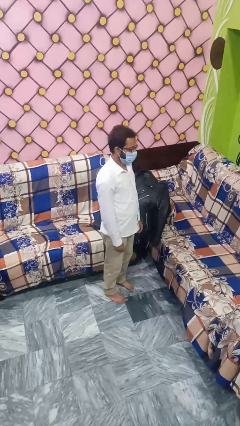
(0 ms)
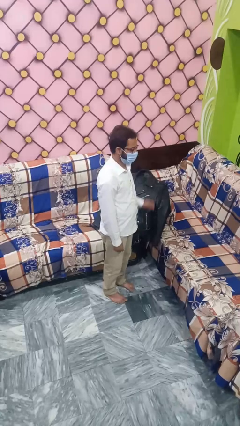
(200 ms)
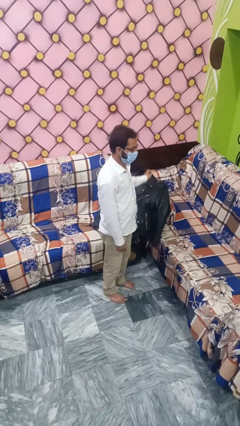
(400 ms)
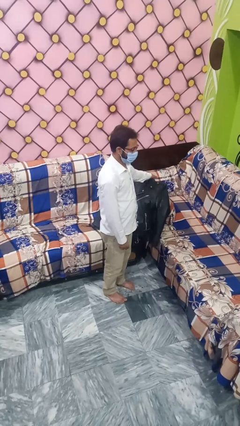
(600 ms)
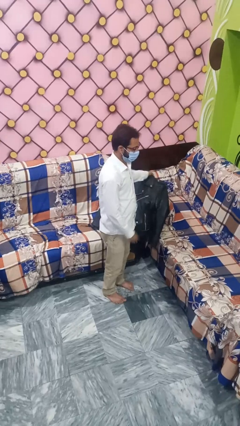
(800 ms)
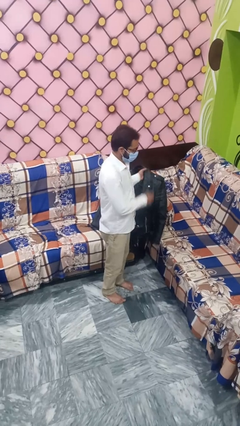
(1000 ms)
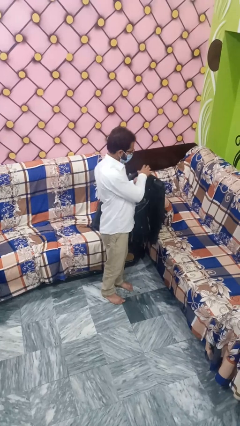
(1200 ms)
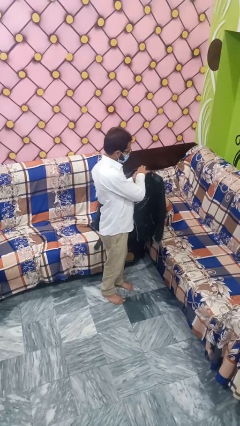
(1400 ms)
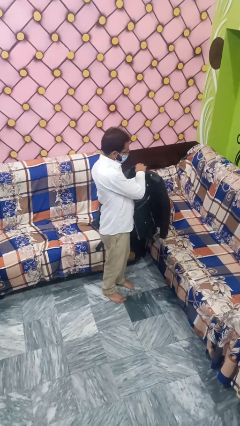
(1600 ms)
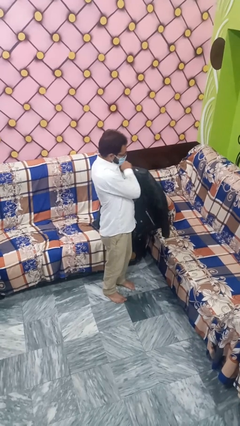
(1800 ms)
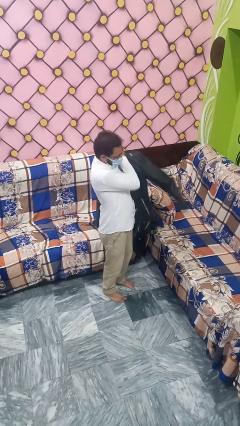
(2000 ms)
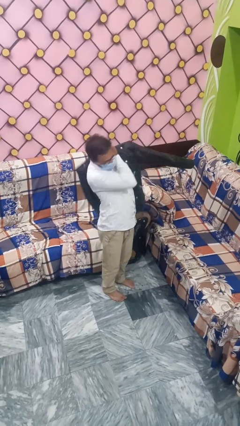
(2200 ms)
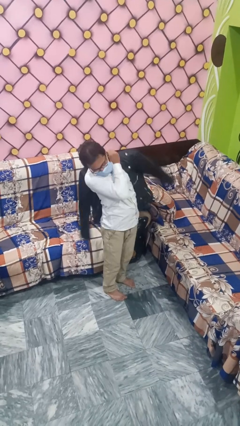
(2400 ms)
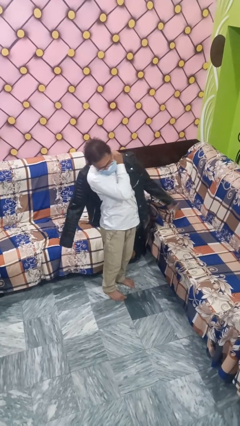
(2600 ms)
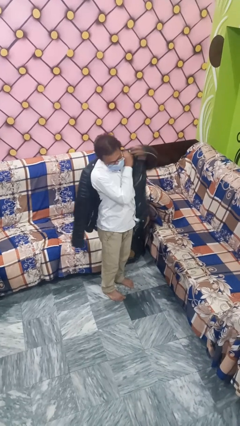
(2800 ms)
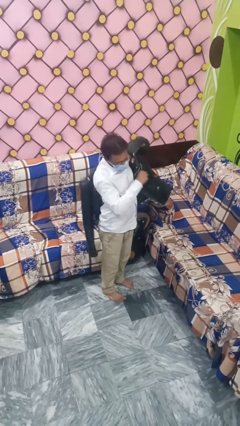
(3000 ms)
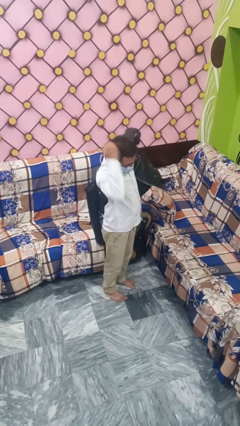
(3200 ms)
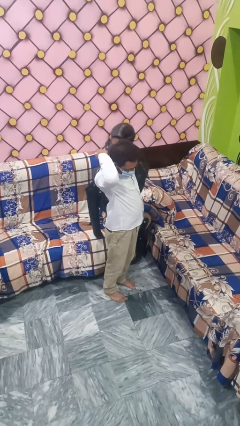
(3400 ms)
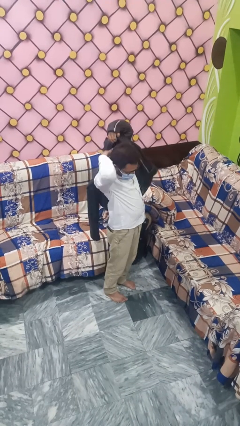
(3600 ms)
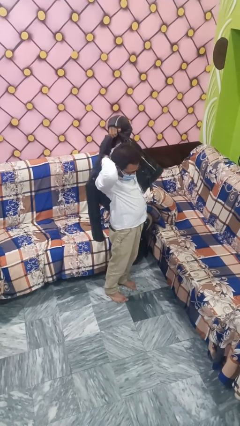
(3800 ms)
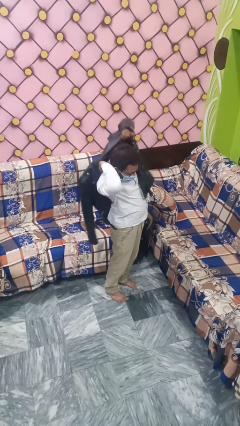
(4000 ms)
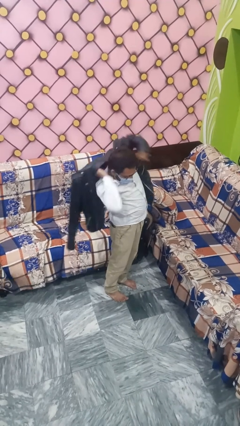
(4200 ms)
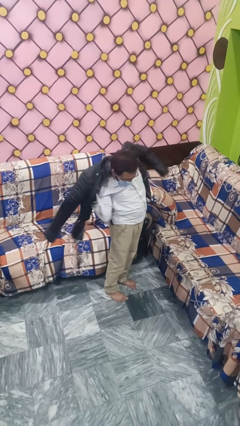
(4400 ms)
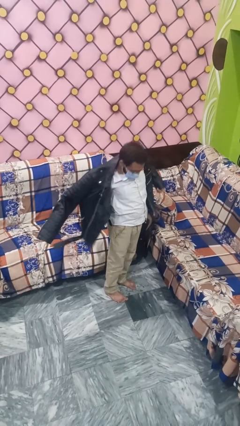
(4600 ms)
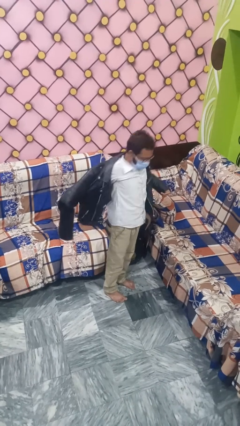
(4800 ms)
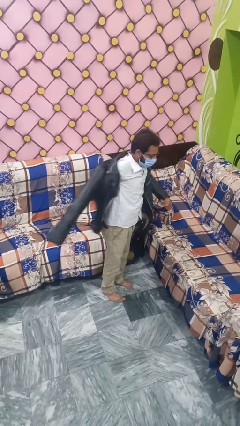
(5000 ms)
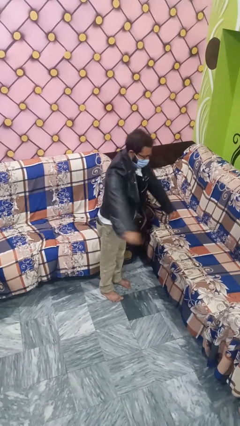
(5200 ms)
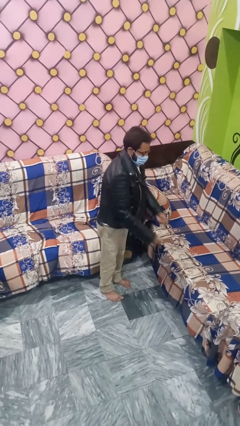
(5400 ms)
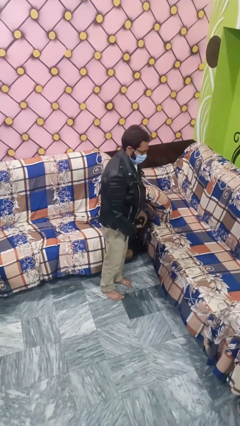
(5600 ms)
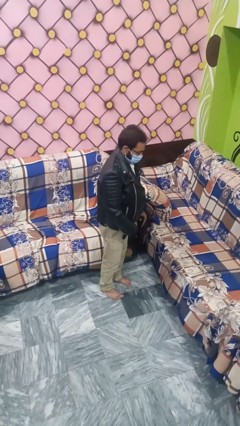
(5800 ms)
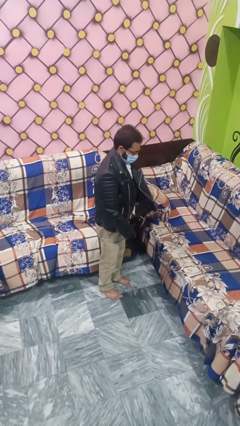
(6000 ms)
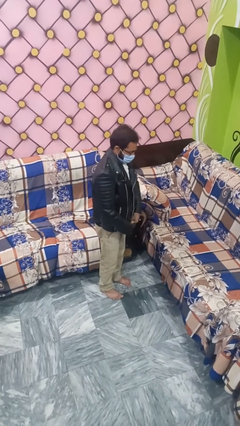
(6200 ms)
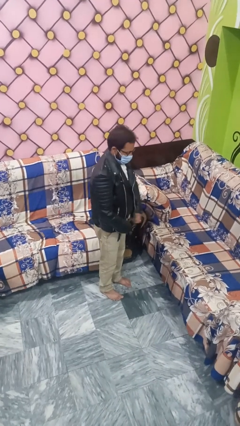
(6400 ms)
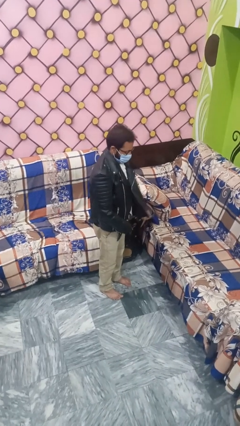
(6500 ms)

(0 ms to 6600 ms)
person puts on jacket

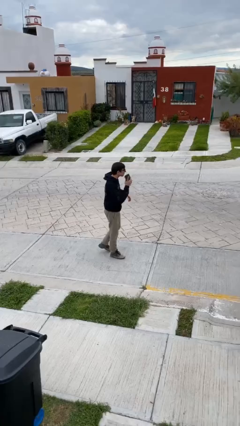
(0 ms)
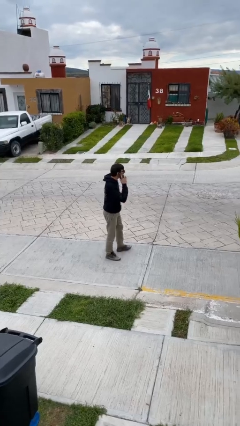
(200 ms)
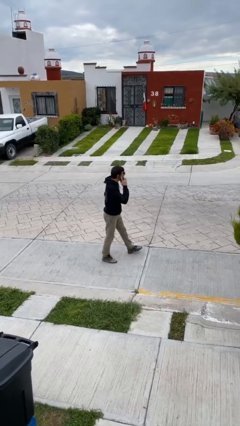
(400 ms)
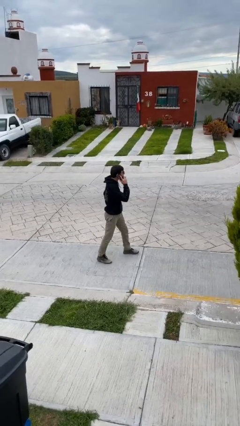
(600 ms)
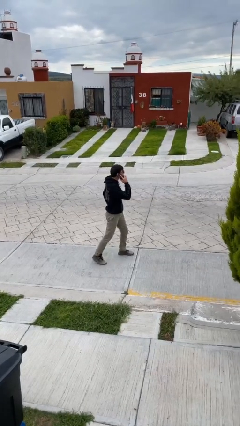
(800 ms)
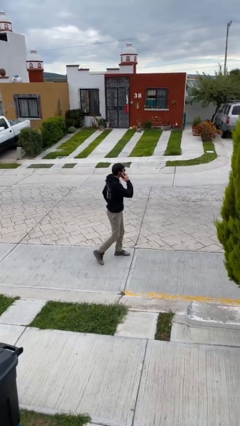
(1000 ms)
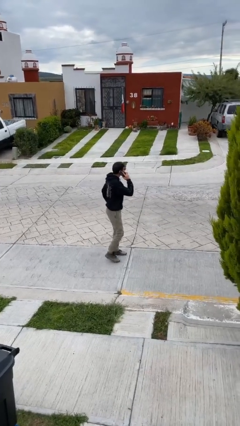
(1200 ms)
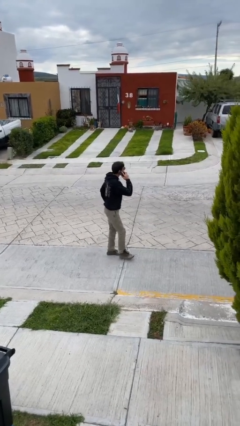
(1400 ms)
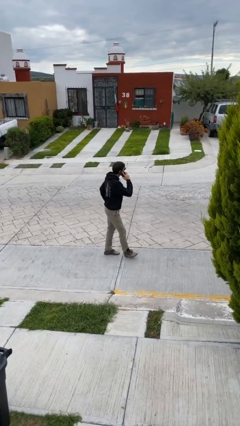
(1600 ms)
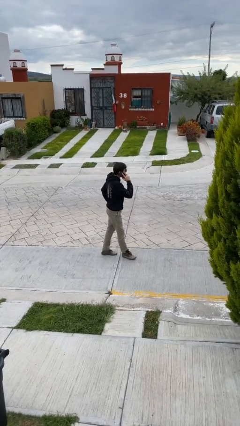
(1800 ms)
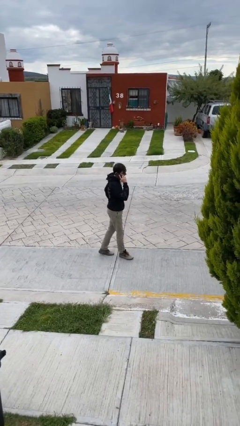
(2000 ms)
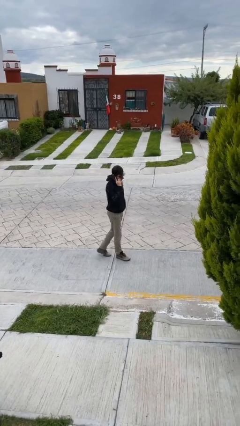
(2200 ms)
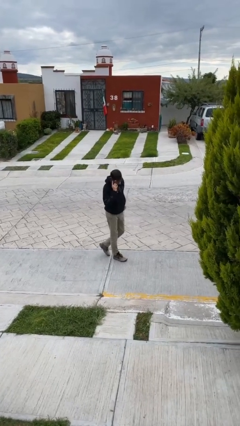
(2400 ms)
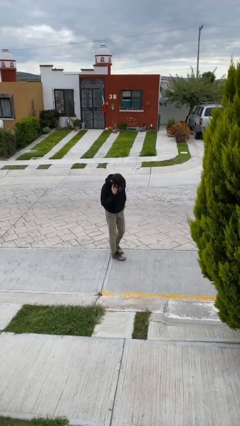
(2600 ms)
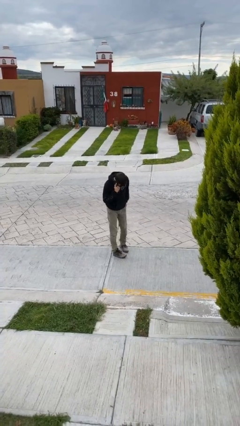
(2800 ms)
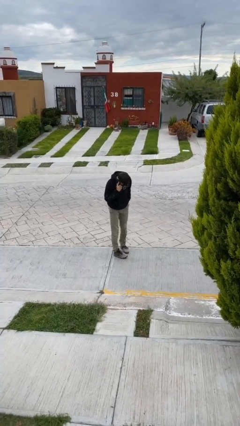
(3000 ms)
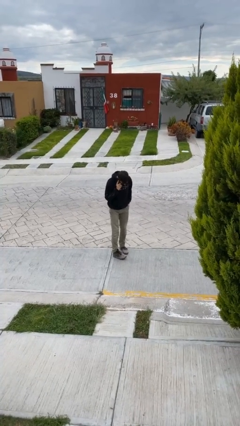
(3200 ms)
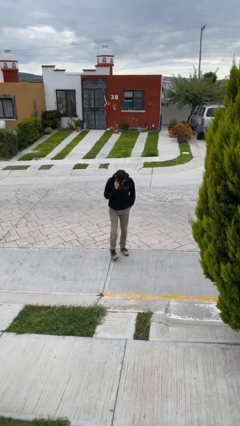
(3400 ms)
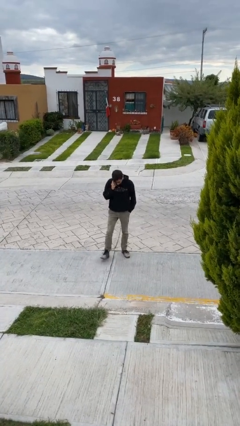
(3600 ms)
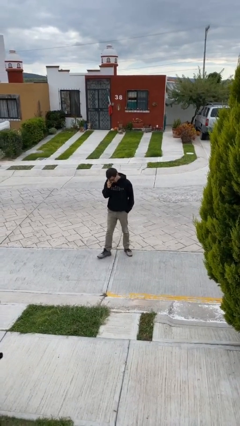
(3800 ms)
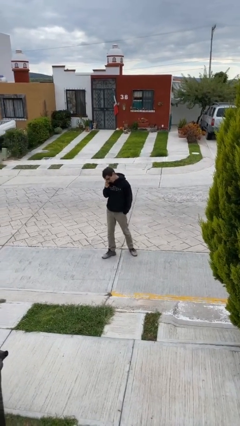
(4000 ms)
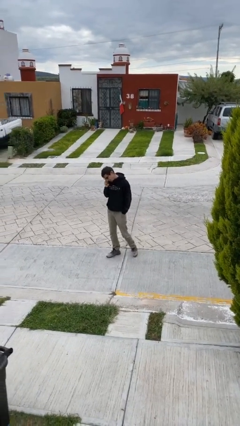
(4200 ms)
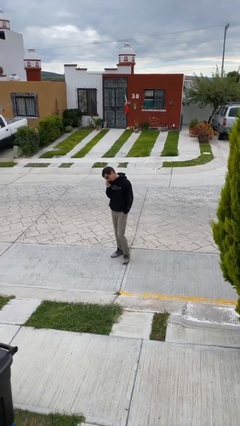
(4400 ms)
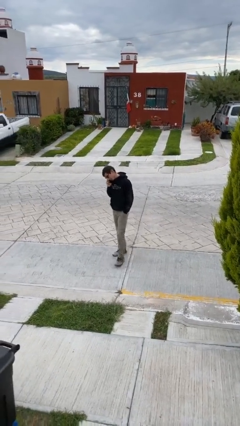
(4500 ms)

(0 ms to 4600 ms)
person talks on phone

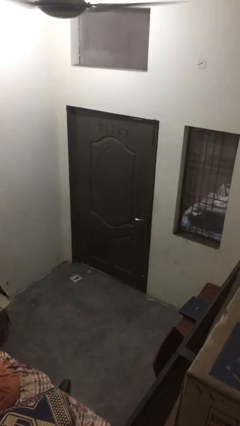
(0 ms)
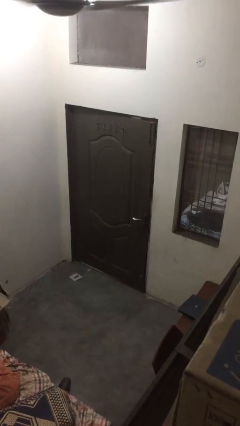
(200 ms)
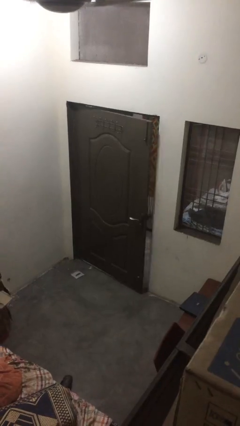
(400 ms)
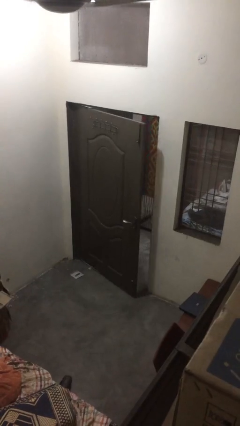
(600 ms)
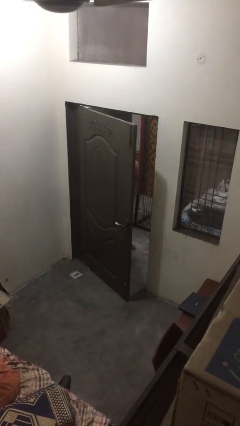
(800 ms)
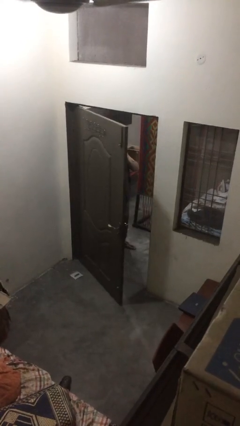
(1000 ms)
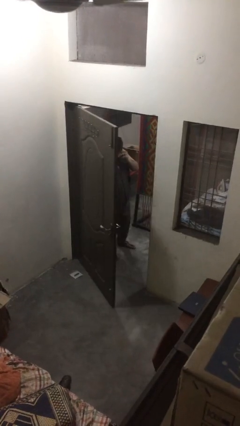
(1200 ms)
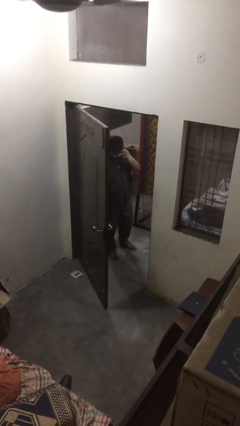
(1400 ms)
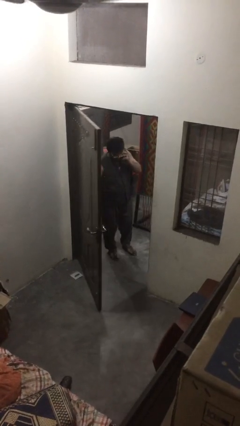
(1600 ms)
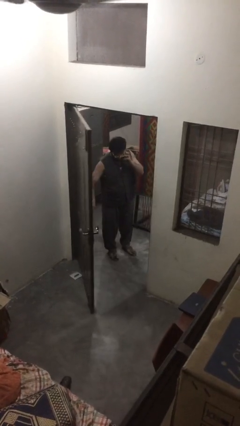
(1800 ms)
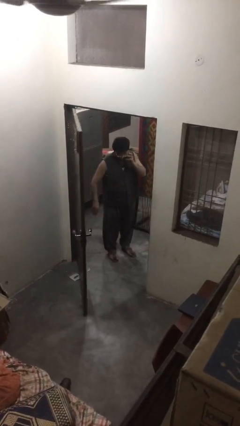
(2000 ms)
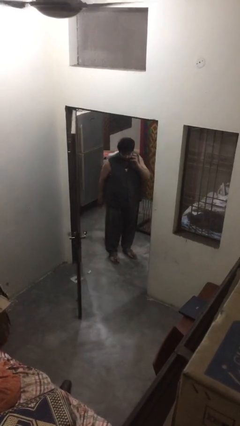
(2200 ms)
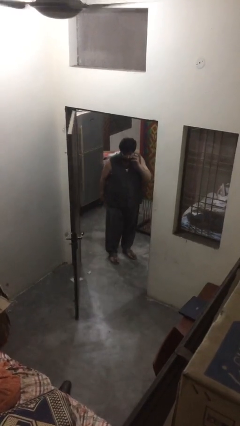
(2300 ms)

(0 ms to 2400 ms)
person opens facility door

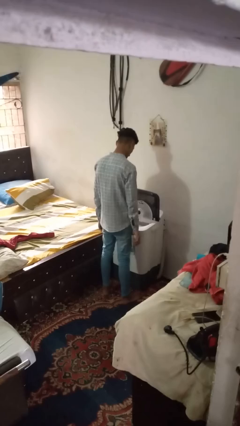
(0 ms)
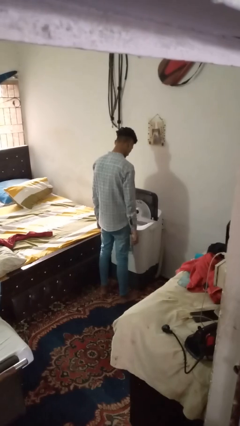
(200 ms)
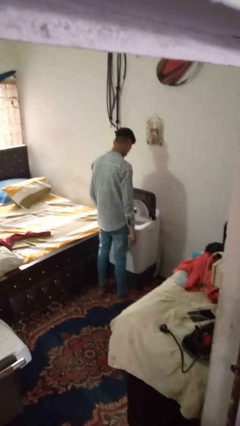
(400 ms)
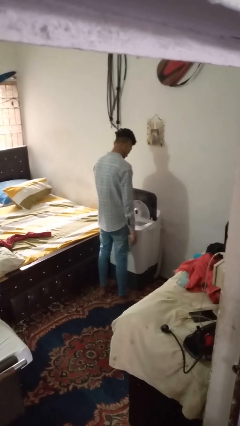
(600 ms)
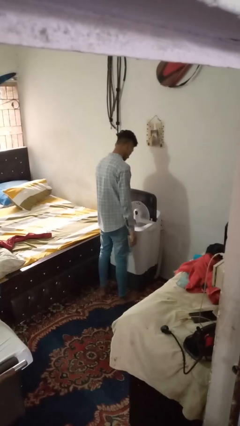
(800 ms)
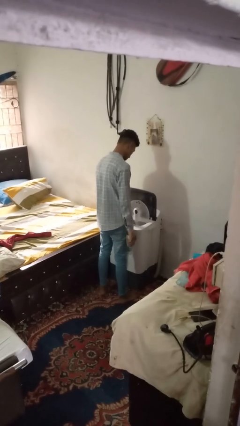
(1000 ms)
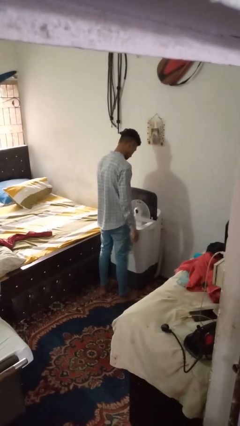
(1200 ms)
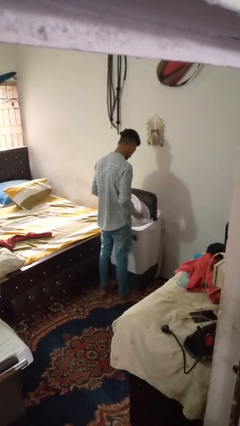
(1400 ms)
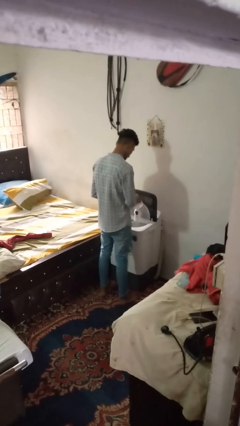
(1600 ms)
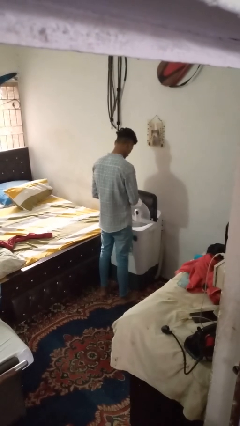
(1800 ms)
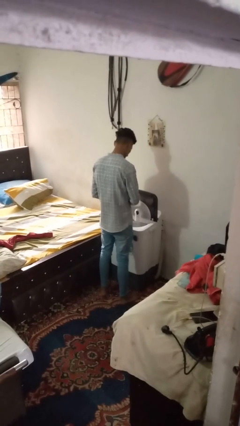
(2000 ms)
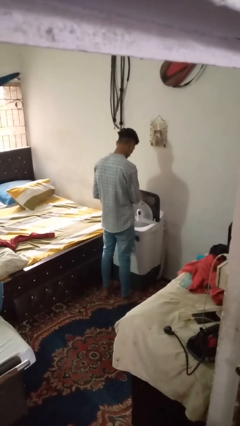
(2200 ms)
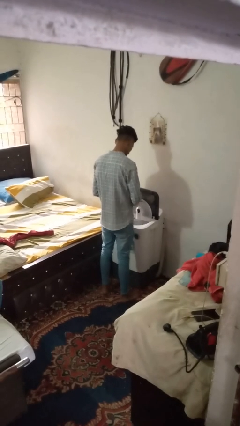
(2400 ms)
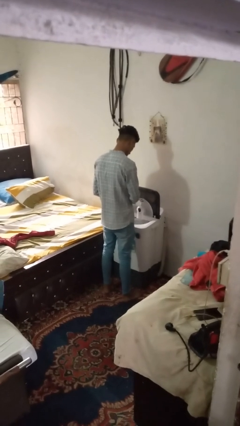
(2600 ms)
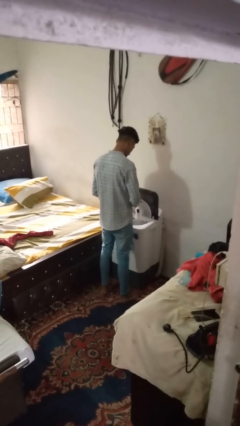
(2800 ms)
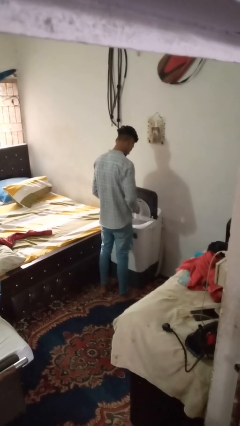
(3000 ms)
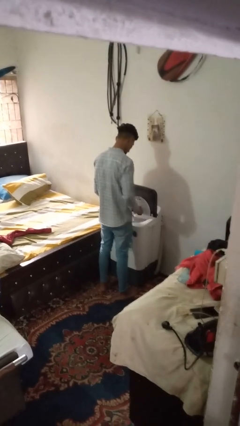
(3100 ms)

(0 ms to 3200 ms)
person cleans dryer lint trap

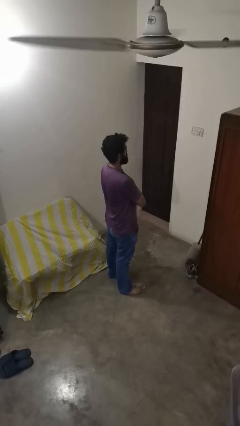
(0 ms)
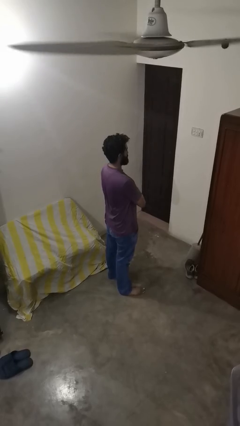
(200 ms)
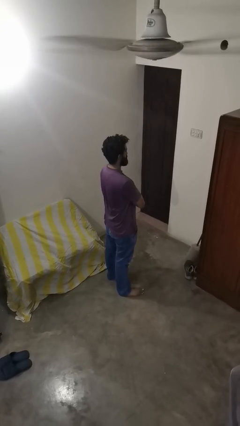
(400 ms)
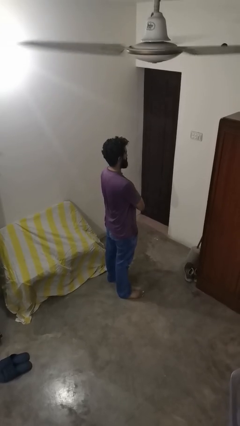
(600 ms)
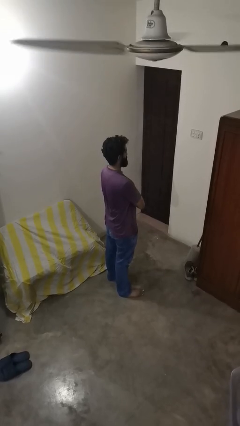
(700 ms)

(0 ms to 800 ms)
person crosses arms
